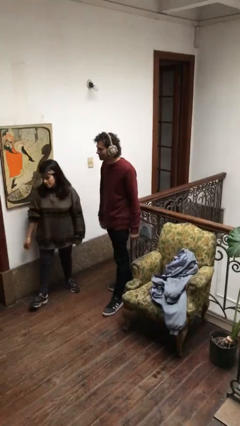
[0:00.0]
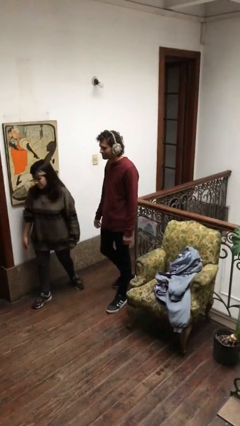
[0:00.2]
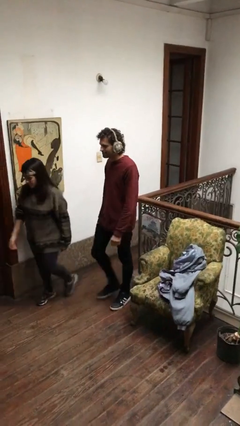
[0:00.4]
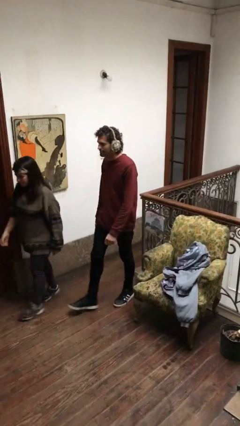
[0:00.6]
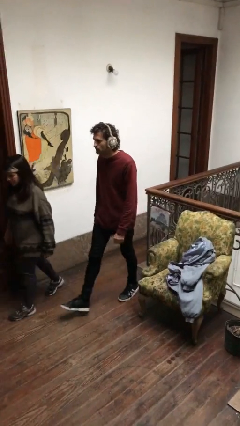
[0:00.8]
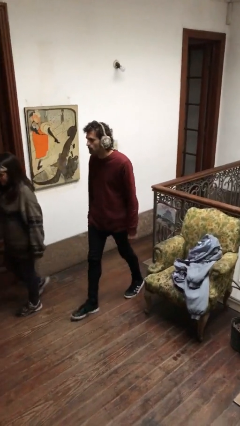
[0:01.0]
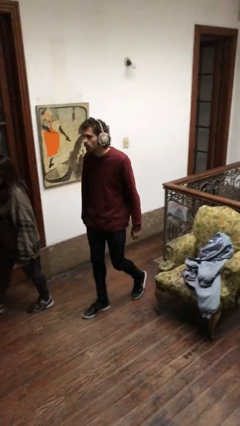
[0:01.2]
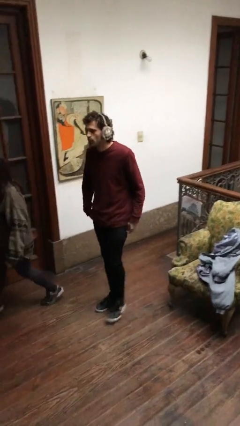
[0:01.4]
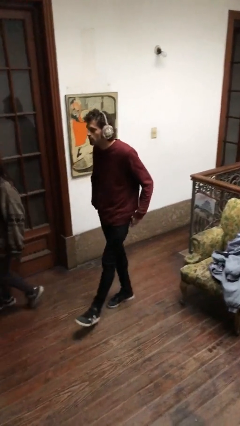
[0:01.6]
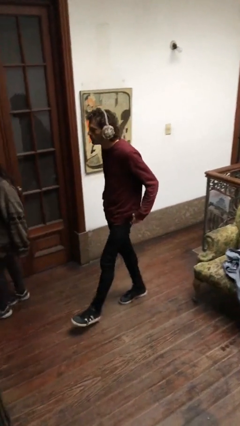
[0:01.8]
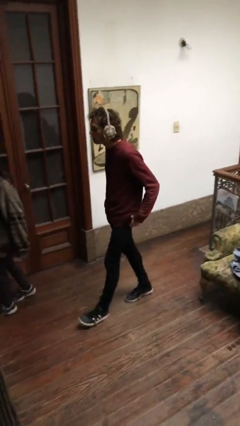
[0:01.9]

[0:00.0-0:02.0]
person talks to person

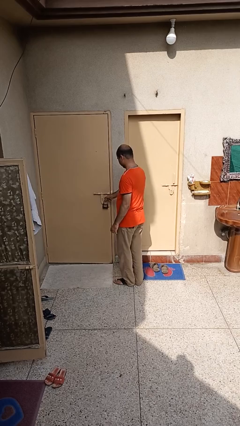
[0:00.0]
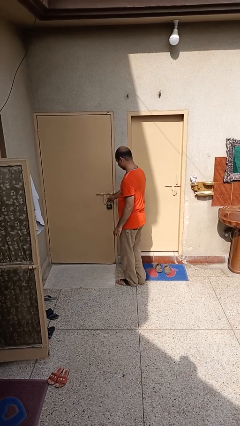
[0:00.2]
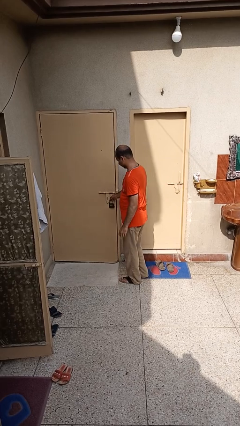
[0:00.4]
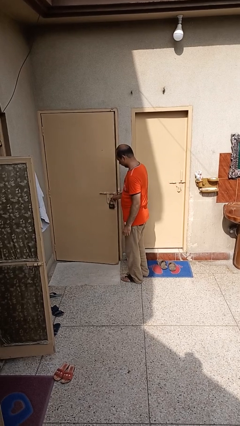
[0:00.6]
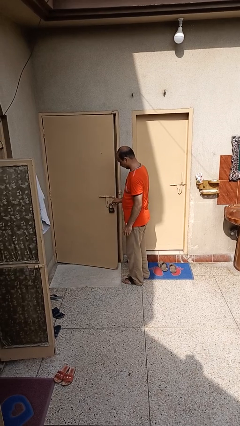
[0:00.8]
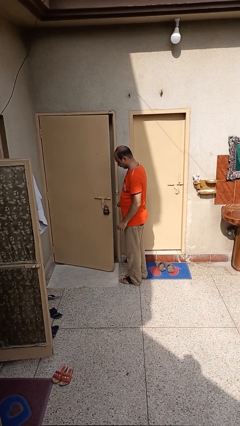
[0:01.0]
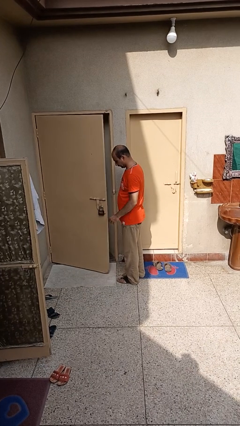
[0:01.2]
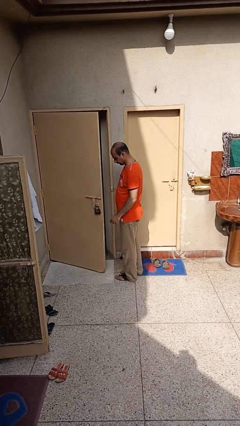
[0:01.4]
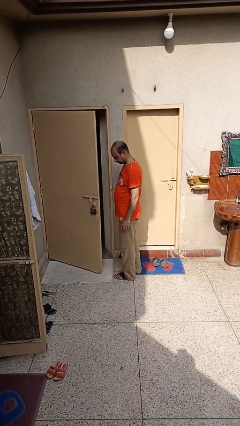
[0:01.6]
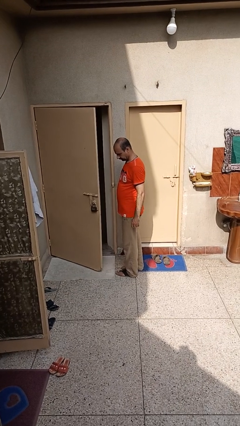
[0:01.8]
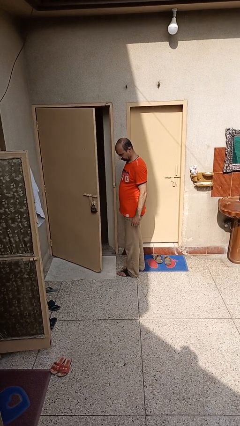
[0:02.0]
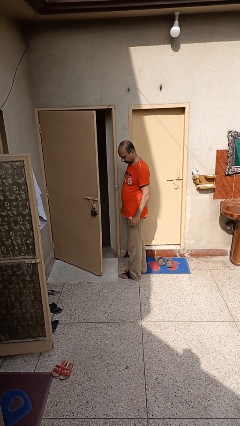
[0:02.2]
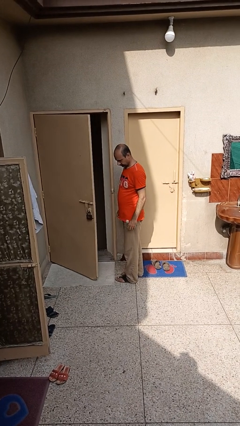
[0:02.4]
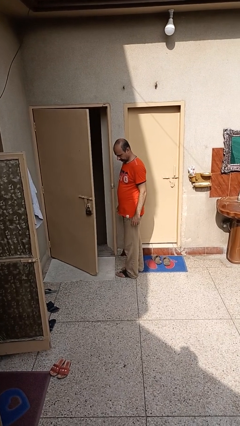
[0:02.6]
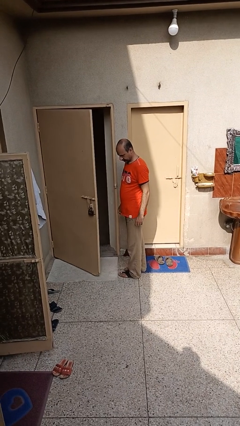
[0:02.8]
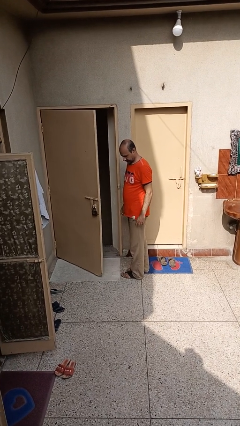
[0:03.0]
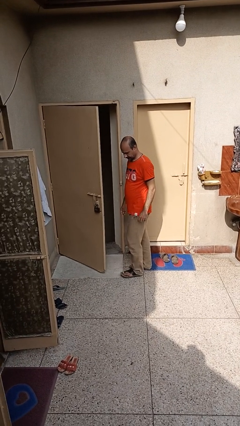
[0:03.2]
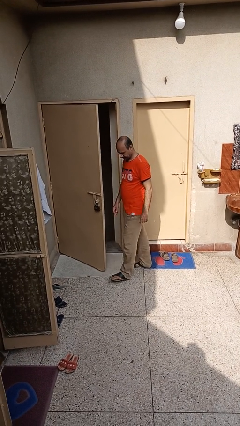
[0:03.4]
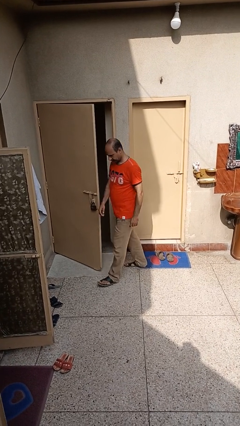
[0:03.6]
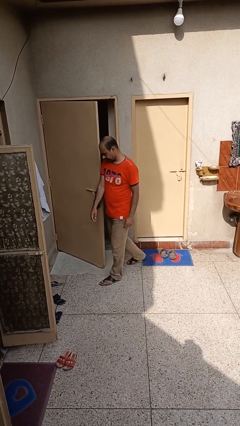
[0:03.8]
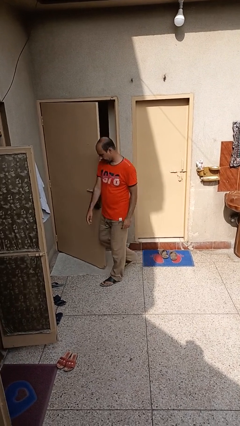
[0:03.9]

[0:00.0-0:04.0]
person opens facility door

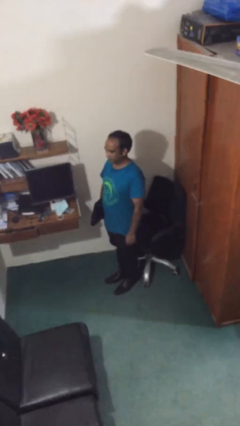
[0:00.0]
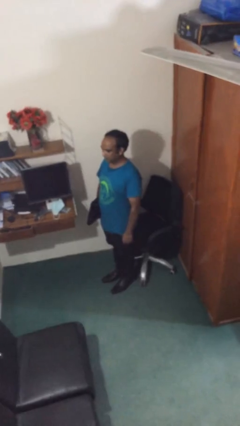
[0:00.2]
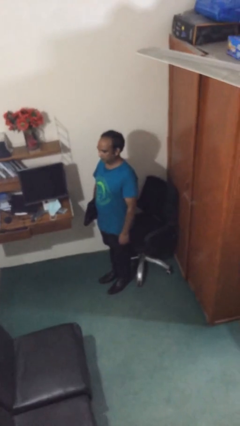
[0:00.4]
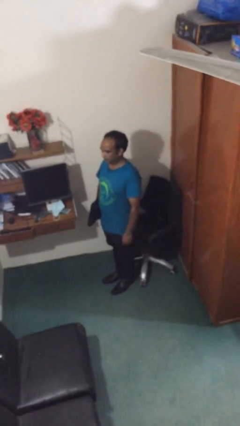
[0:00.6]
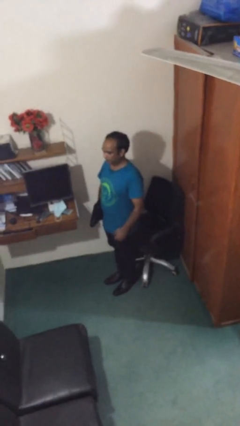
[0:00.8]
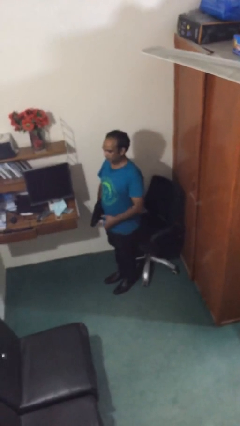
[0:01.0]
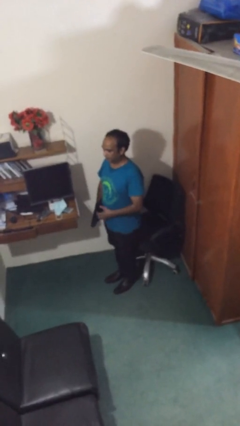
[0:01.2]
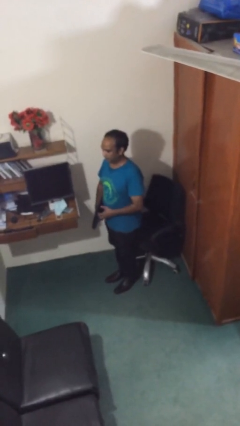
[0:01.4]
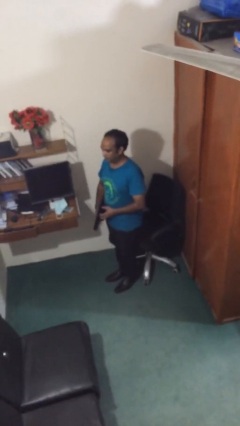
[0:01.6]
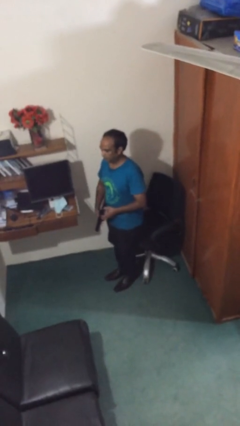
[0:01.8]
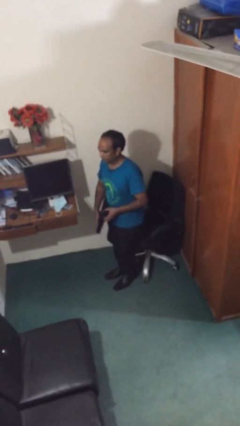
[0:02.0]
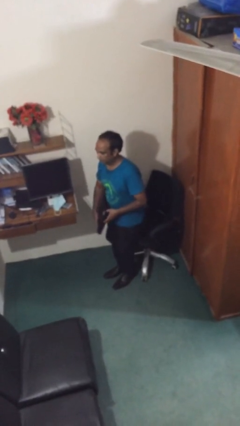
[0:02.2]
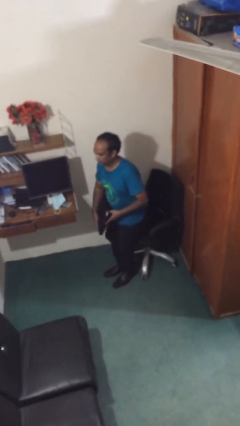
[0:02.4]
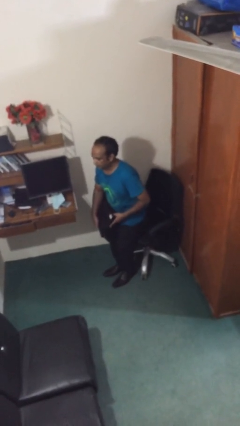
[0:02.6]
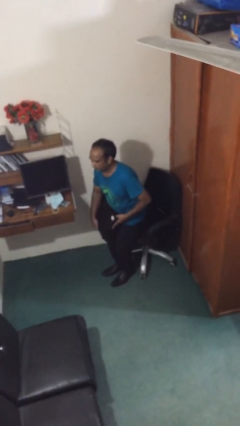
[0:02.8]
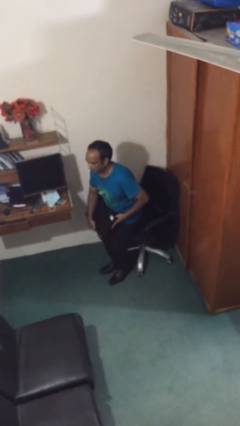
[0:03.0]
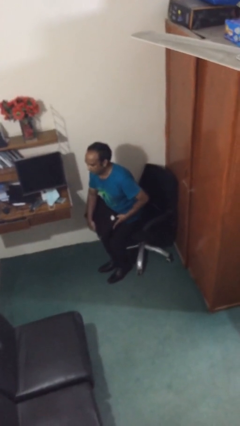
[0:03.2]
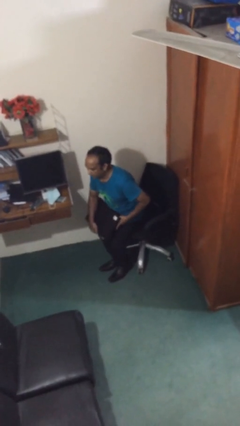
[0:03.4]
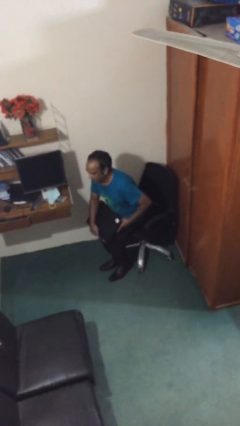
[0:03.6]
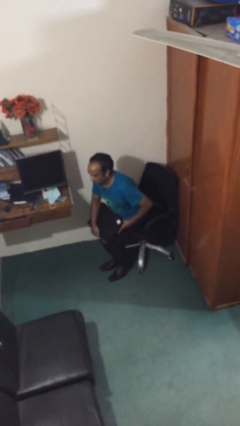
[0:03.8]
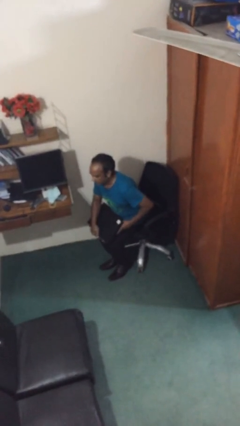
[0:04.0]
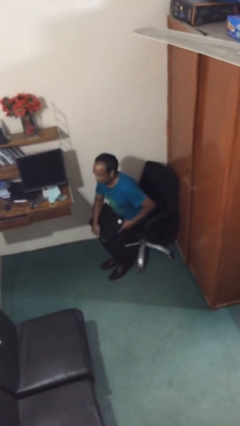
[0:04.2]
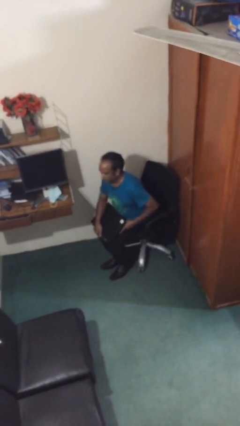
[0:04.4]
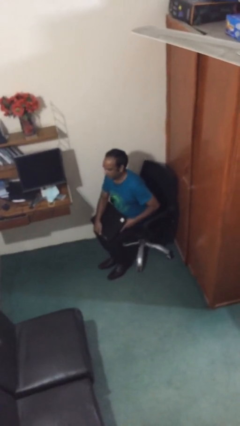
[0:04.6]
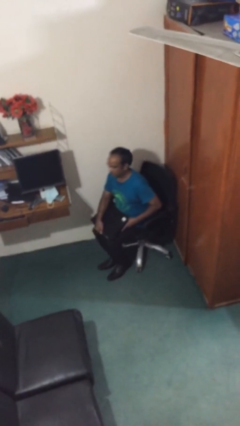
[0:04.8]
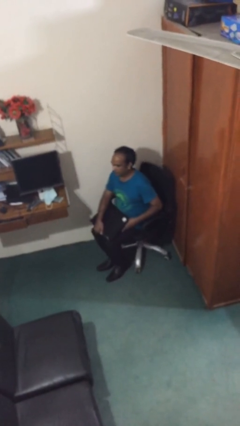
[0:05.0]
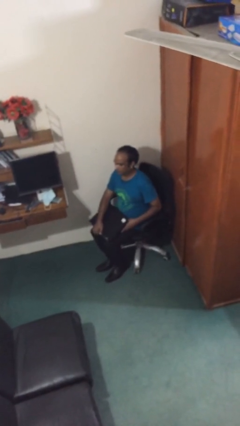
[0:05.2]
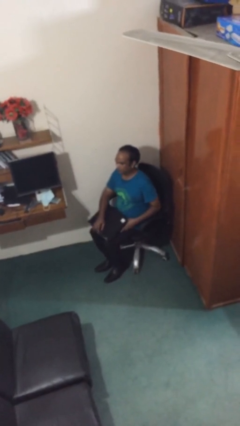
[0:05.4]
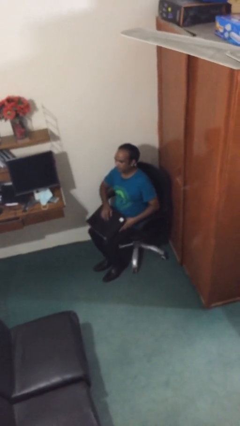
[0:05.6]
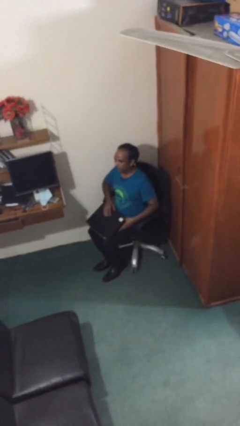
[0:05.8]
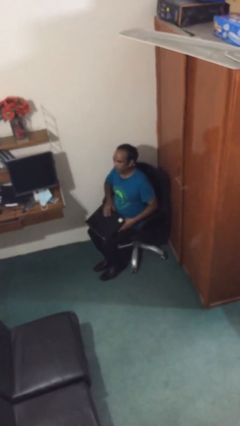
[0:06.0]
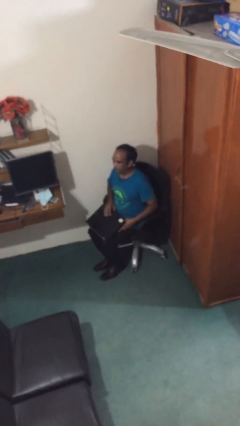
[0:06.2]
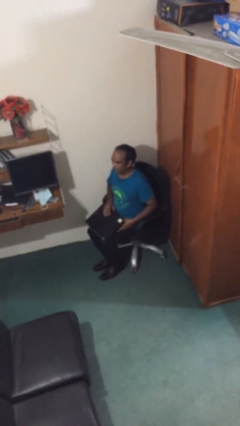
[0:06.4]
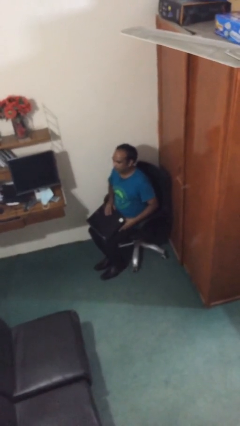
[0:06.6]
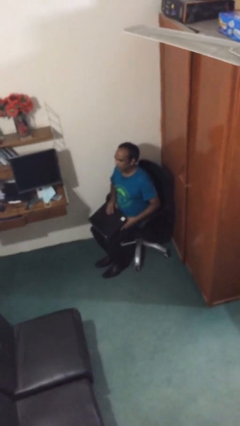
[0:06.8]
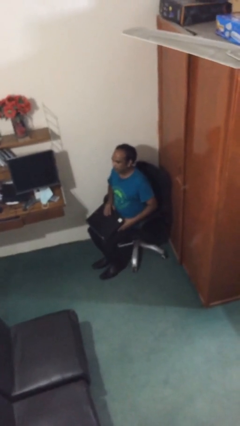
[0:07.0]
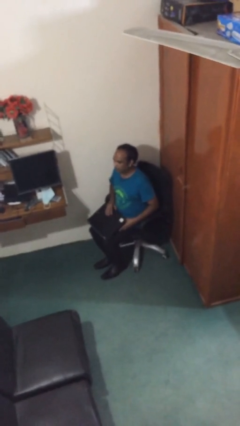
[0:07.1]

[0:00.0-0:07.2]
person sits down

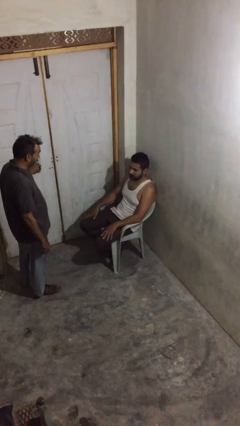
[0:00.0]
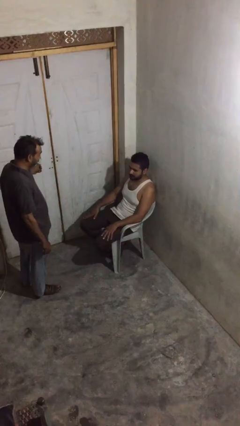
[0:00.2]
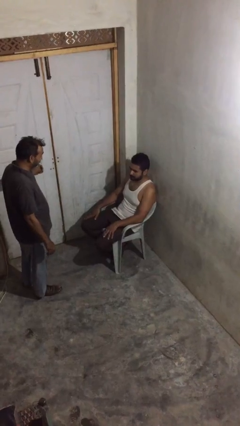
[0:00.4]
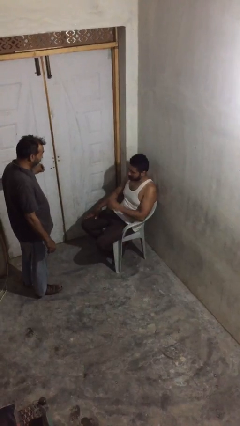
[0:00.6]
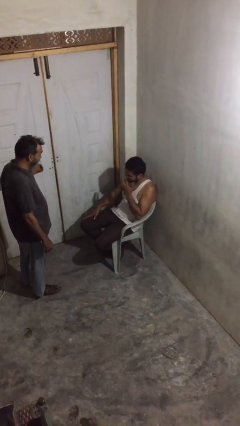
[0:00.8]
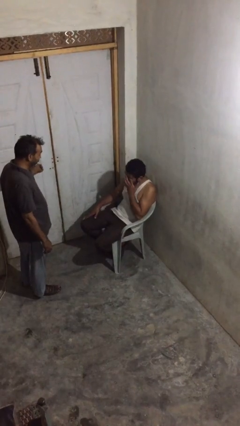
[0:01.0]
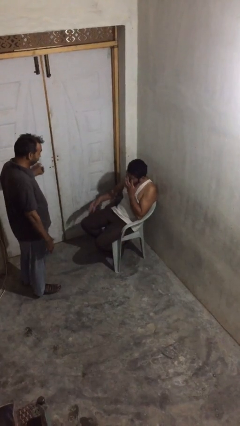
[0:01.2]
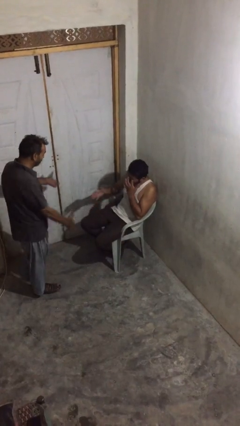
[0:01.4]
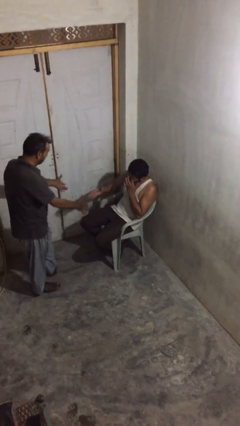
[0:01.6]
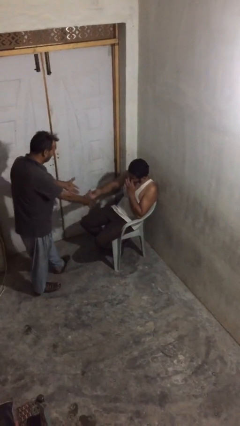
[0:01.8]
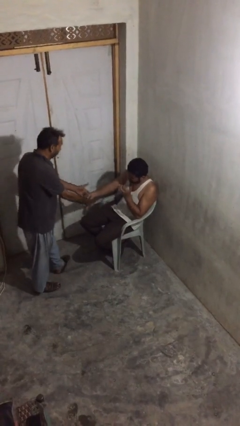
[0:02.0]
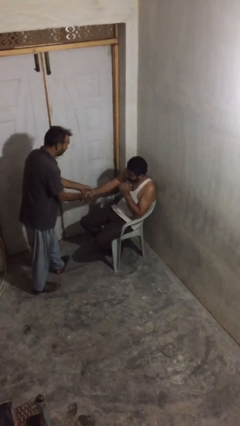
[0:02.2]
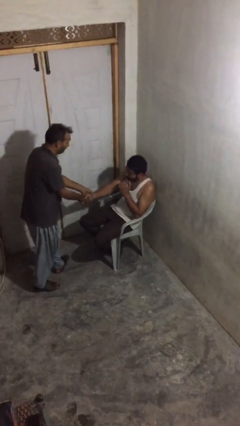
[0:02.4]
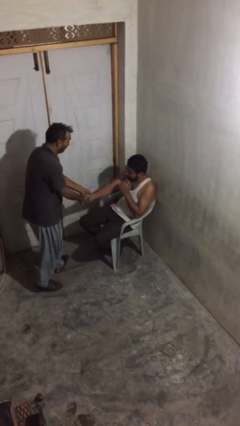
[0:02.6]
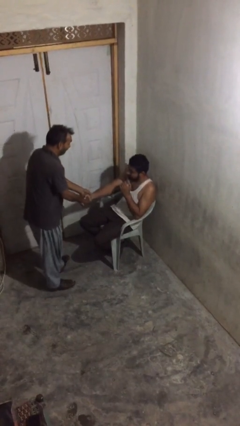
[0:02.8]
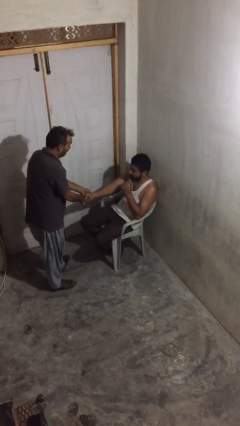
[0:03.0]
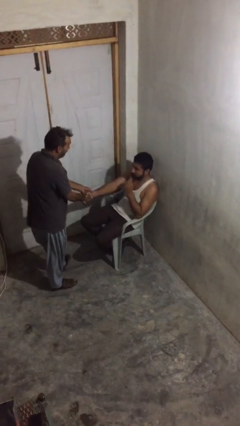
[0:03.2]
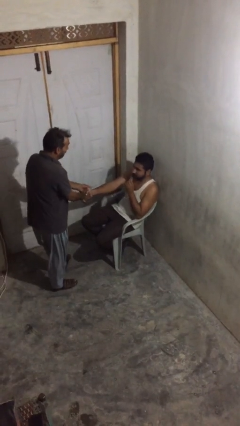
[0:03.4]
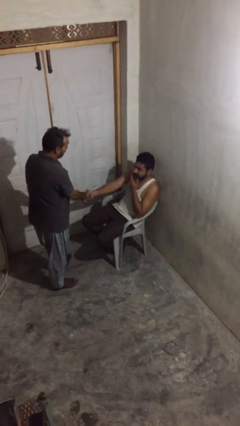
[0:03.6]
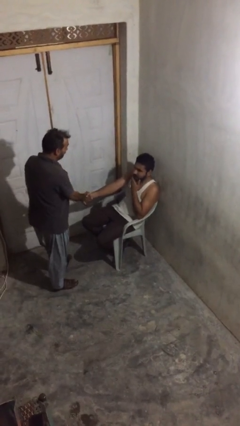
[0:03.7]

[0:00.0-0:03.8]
person shakes hand

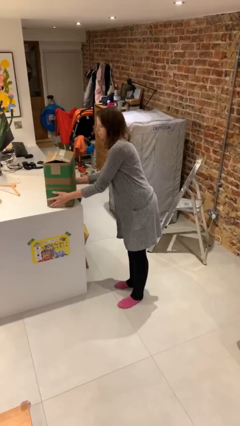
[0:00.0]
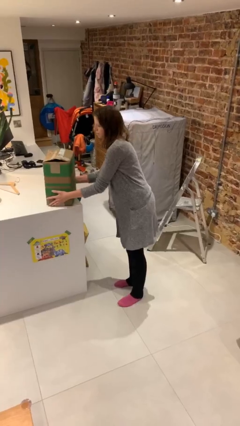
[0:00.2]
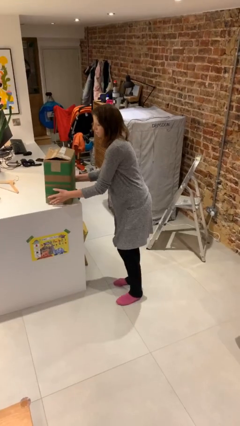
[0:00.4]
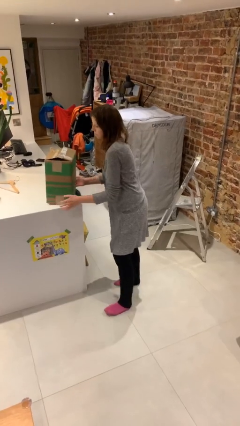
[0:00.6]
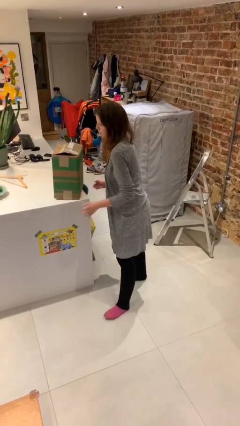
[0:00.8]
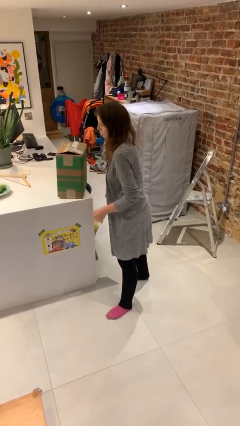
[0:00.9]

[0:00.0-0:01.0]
person puts down object on table
